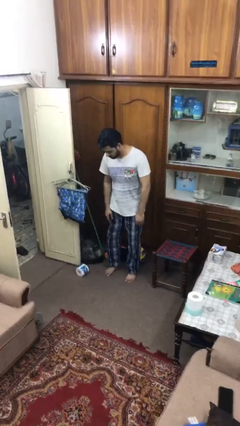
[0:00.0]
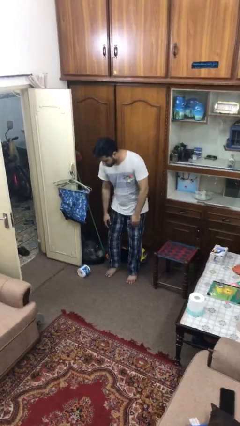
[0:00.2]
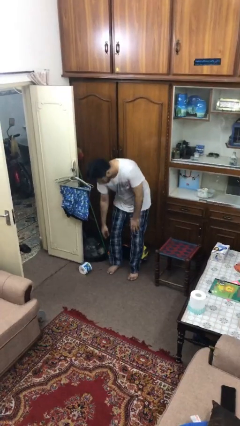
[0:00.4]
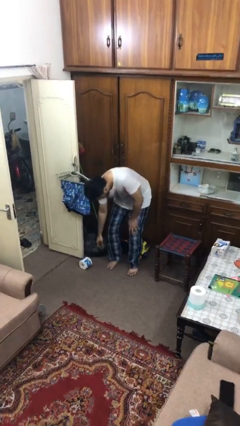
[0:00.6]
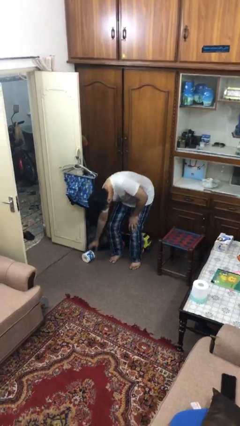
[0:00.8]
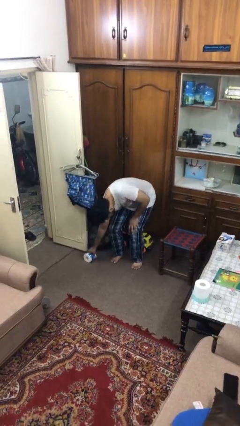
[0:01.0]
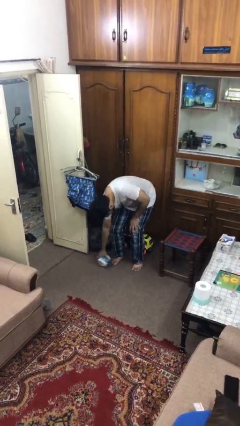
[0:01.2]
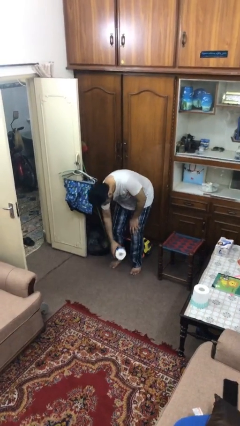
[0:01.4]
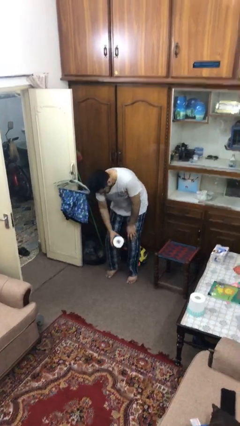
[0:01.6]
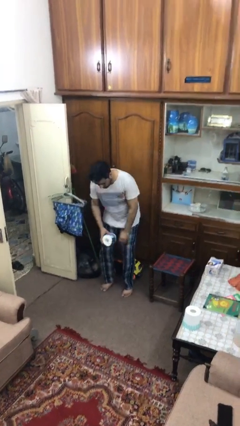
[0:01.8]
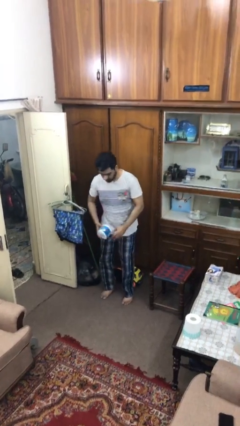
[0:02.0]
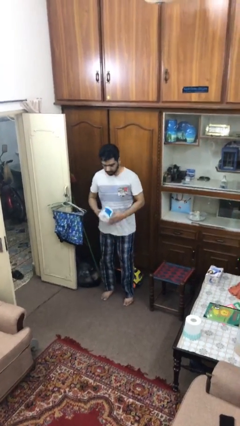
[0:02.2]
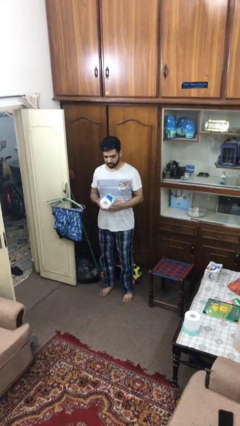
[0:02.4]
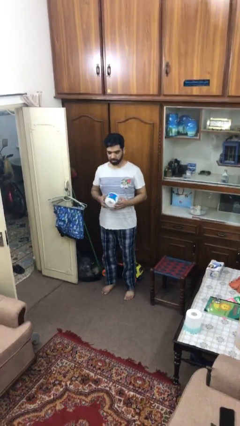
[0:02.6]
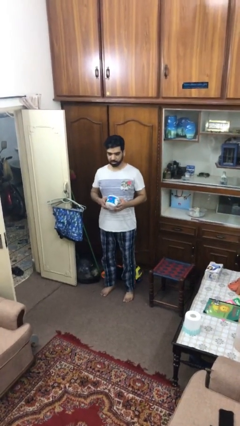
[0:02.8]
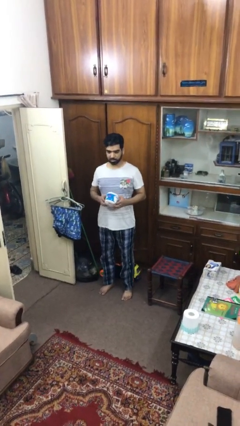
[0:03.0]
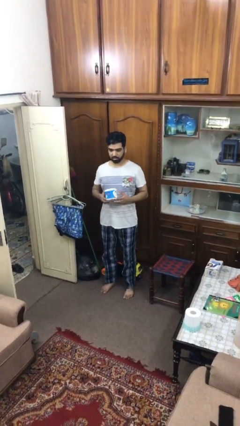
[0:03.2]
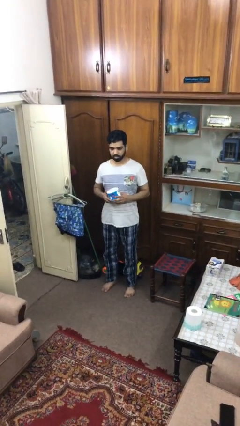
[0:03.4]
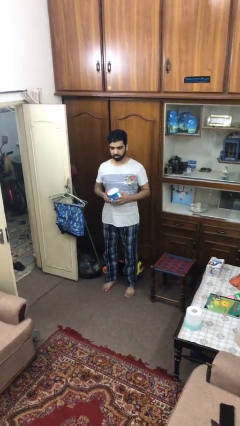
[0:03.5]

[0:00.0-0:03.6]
person picks up object from floor

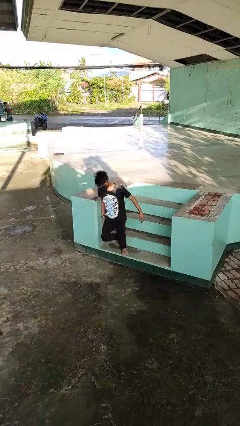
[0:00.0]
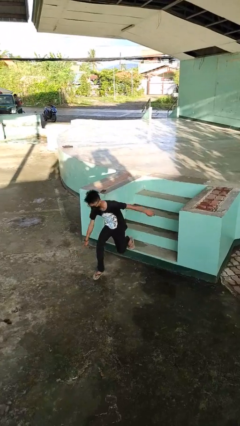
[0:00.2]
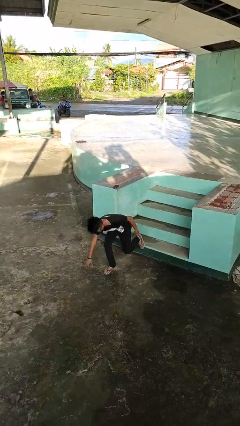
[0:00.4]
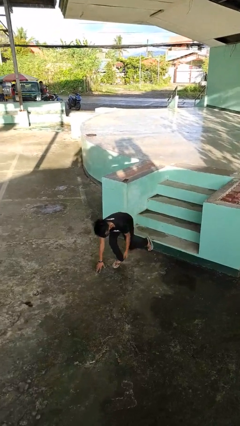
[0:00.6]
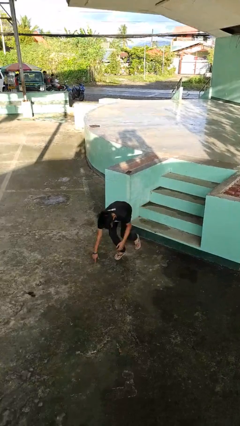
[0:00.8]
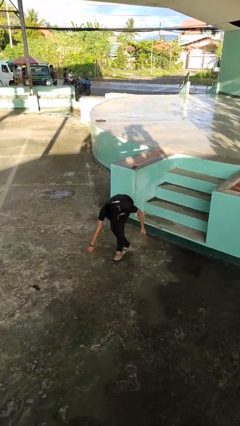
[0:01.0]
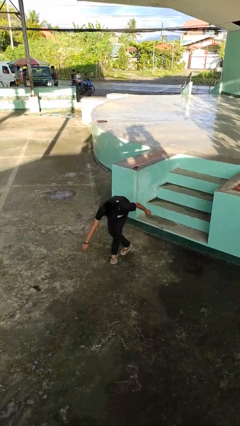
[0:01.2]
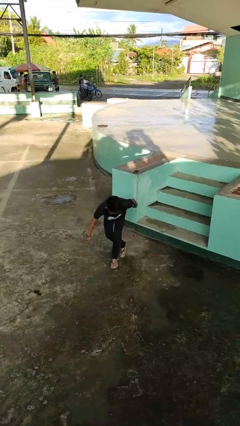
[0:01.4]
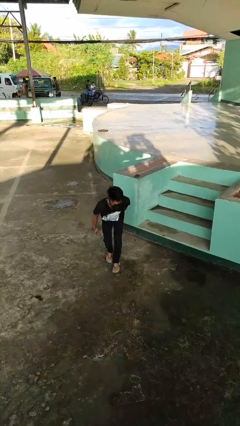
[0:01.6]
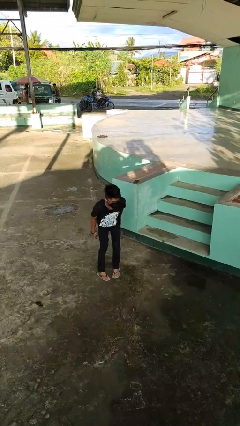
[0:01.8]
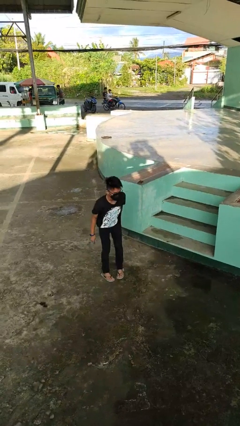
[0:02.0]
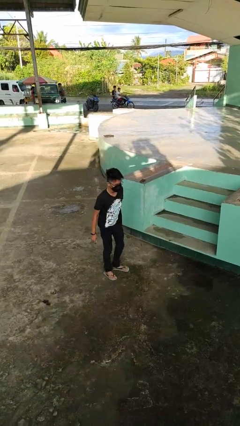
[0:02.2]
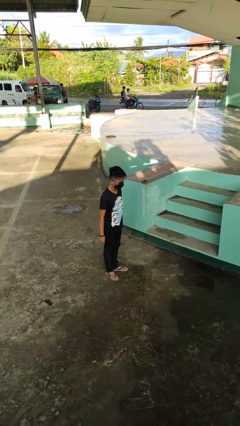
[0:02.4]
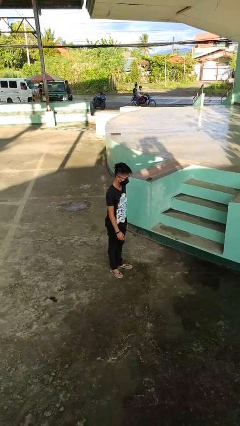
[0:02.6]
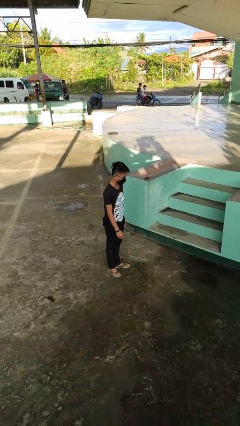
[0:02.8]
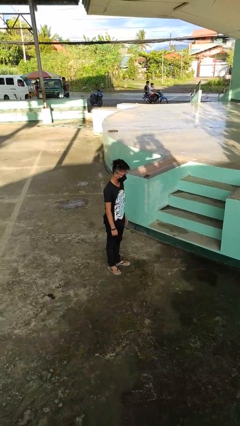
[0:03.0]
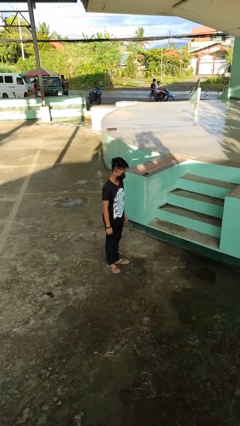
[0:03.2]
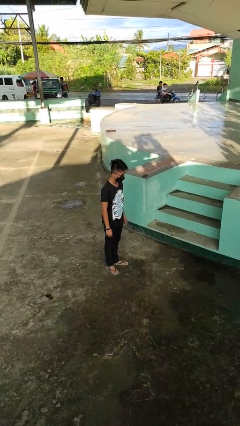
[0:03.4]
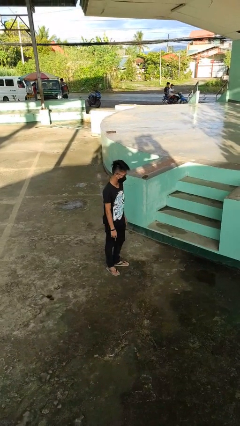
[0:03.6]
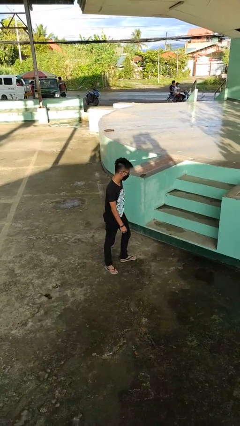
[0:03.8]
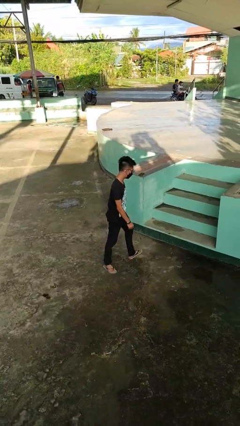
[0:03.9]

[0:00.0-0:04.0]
person trips on stair

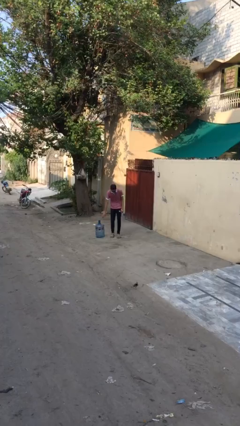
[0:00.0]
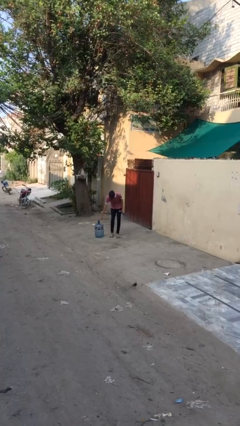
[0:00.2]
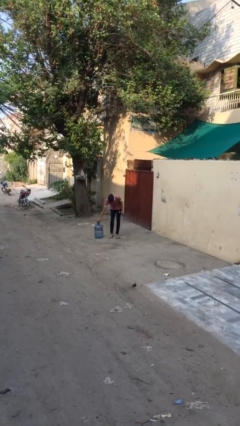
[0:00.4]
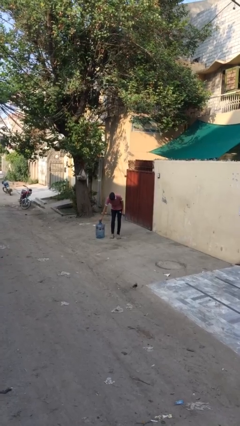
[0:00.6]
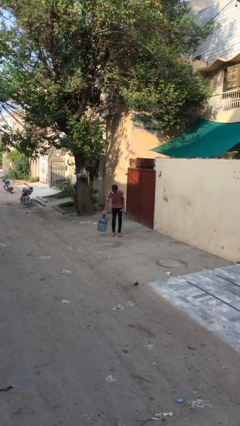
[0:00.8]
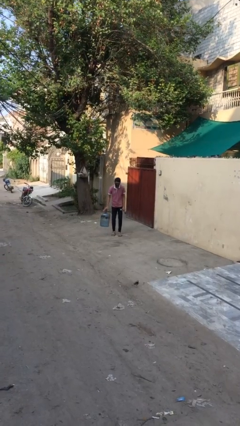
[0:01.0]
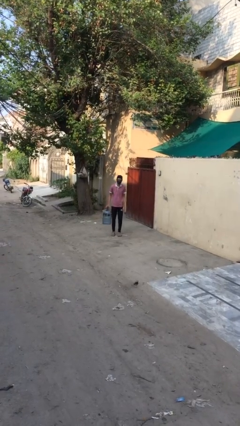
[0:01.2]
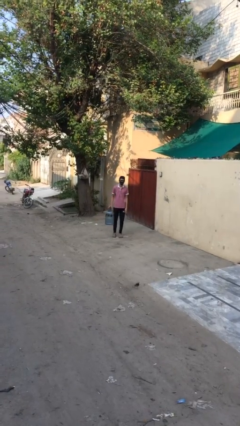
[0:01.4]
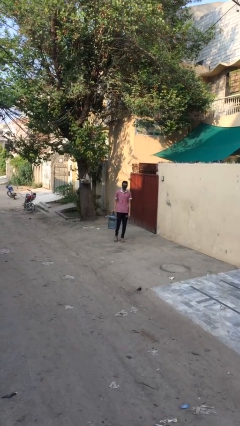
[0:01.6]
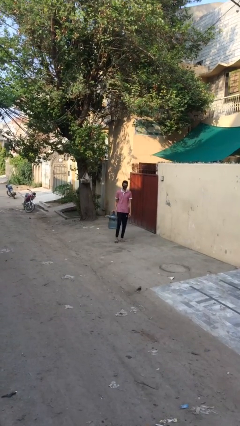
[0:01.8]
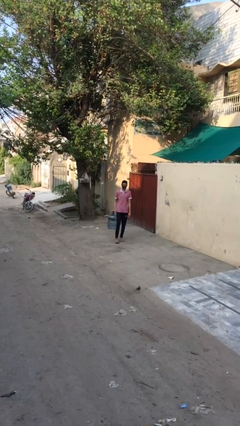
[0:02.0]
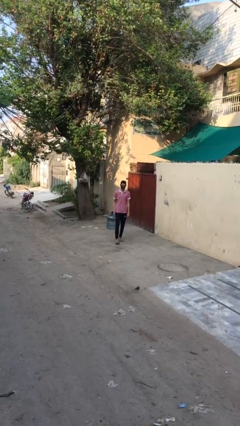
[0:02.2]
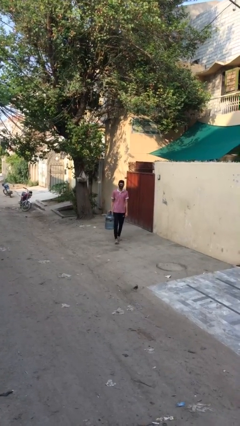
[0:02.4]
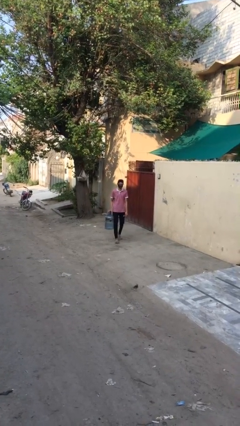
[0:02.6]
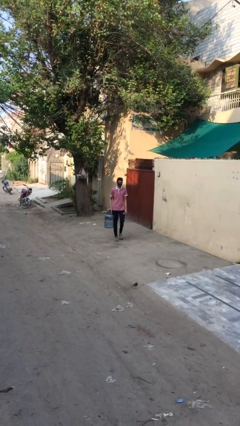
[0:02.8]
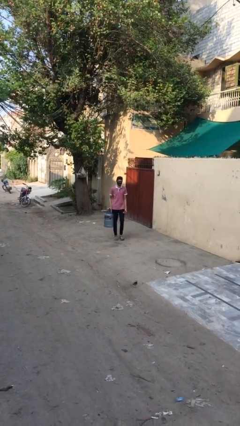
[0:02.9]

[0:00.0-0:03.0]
person carries heavy object

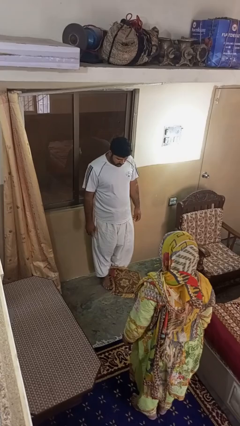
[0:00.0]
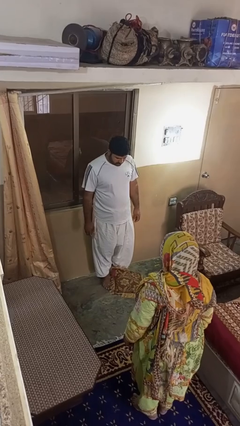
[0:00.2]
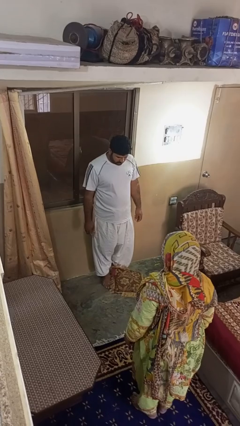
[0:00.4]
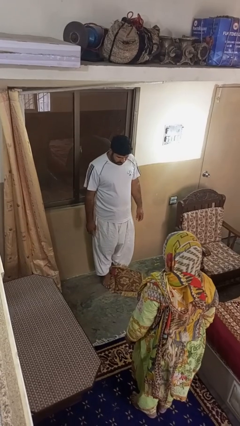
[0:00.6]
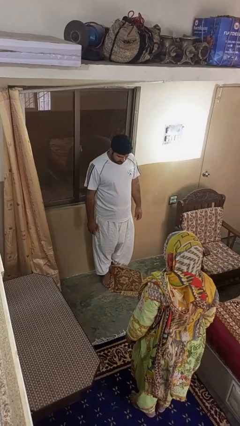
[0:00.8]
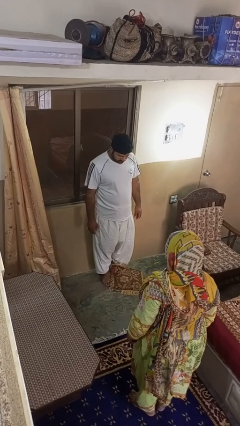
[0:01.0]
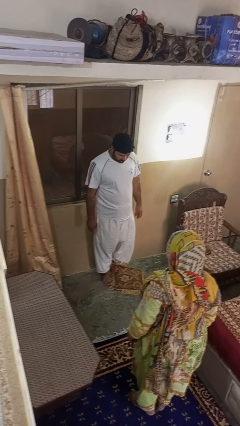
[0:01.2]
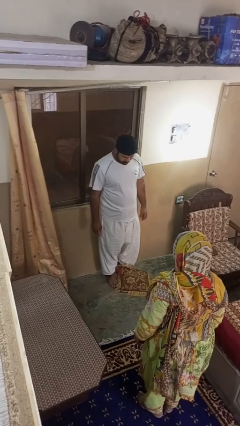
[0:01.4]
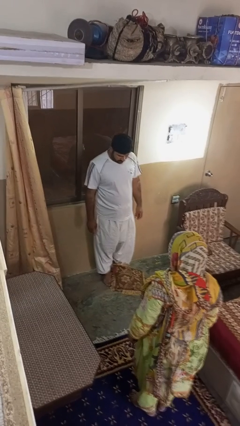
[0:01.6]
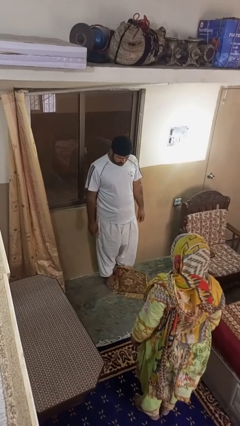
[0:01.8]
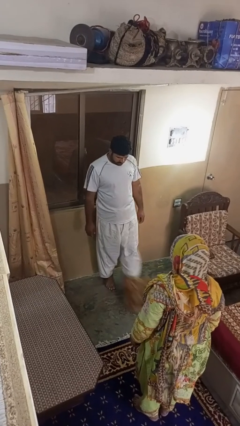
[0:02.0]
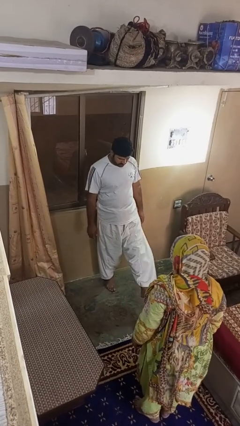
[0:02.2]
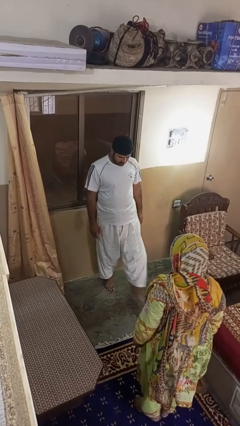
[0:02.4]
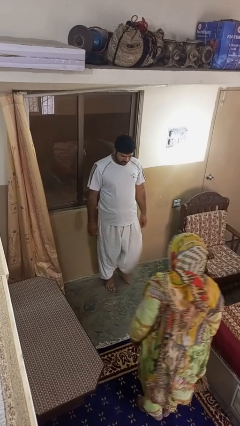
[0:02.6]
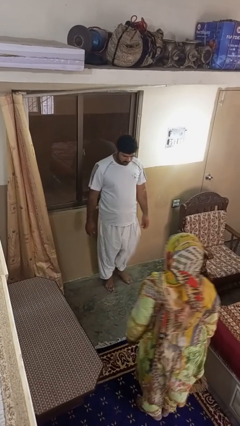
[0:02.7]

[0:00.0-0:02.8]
person kicks object to person

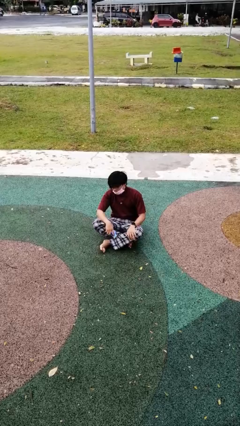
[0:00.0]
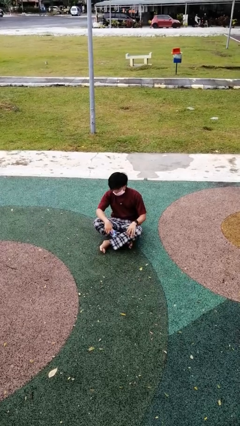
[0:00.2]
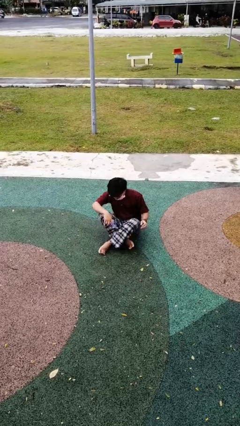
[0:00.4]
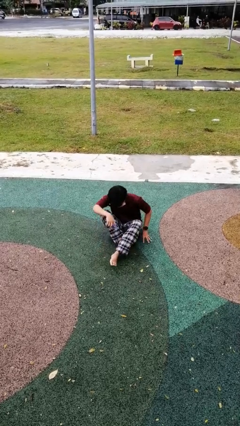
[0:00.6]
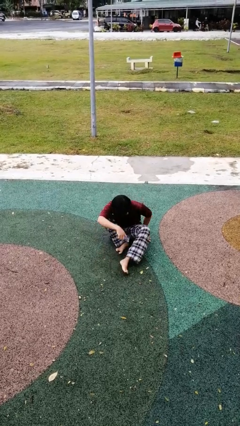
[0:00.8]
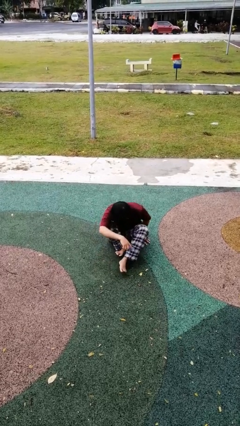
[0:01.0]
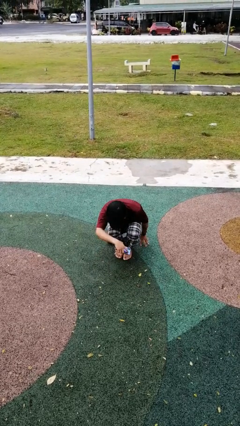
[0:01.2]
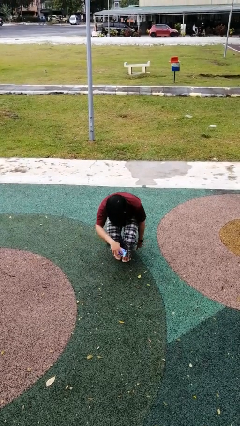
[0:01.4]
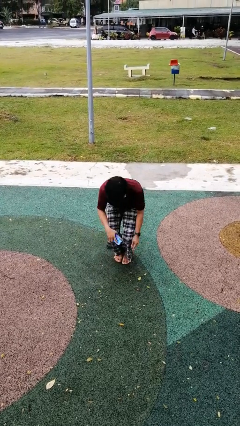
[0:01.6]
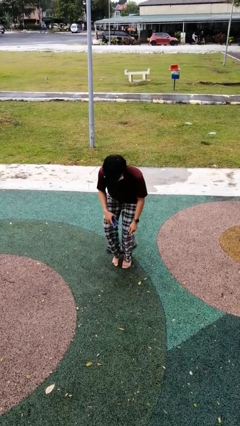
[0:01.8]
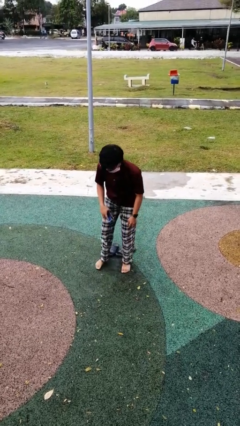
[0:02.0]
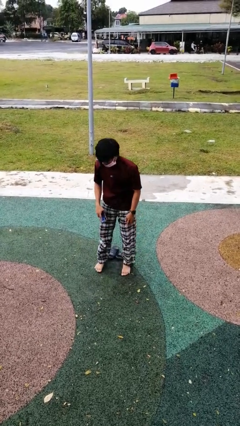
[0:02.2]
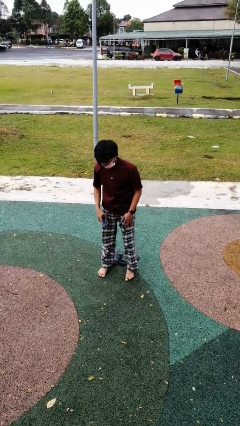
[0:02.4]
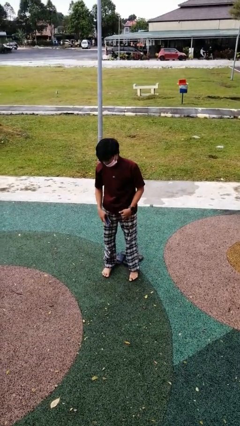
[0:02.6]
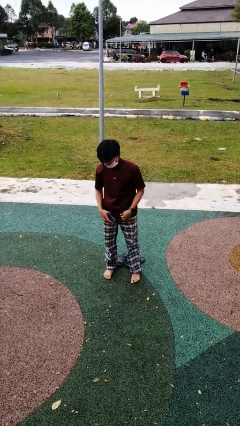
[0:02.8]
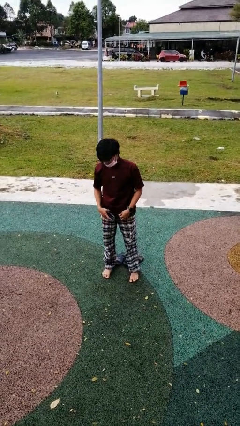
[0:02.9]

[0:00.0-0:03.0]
person stands up from floor

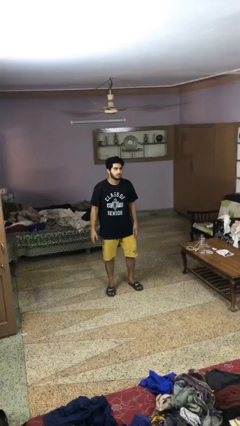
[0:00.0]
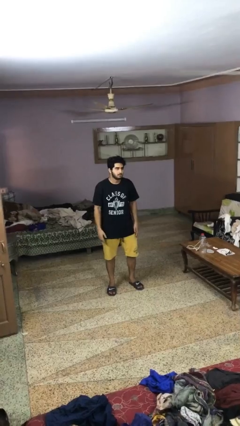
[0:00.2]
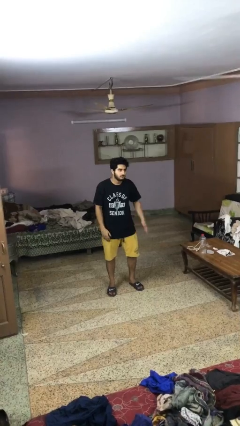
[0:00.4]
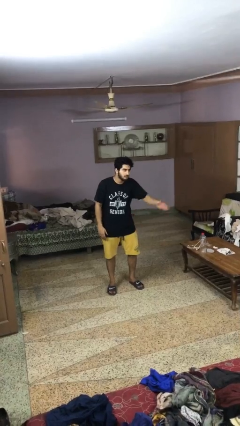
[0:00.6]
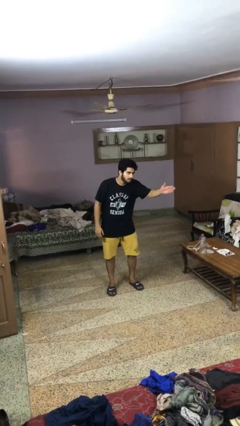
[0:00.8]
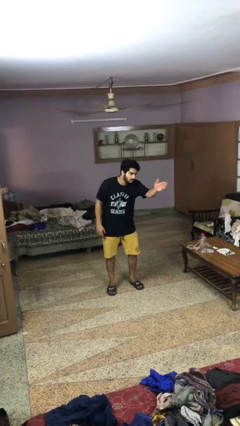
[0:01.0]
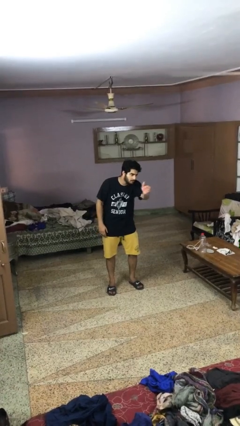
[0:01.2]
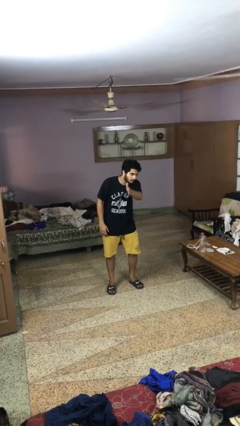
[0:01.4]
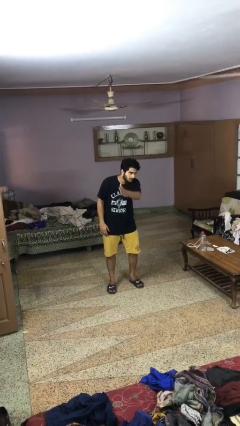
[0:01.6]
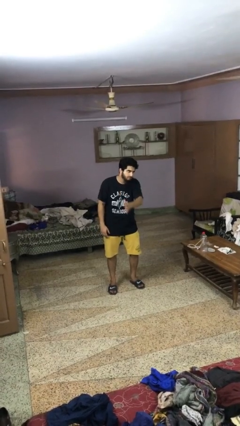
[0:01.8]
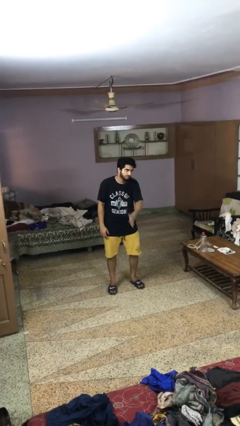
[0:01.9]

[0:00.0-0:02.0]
person gestures swipe right
